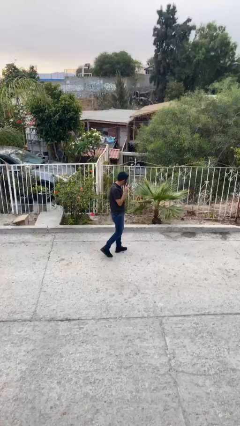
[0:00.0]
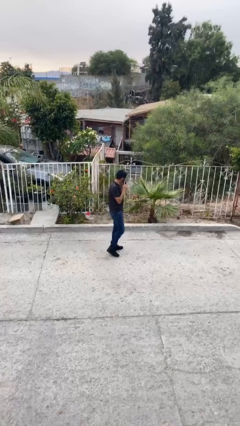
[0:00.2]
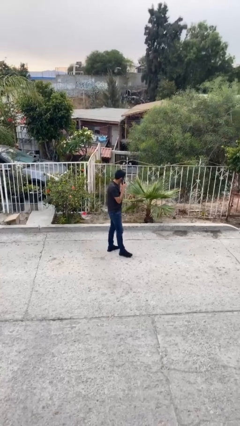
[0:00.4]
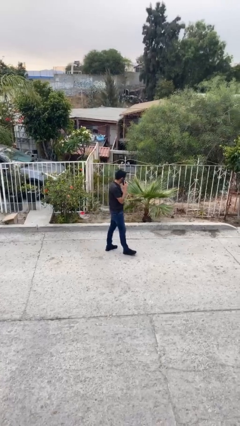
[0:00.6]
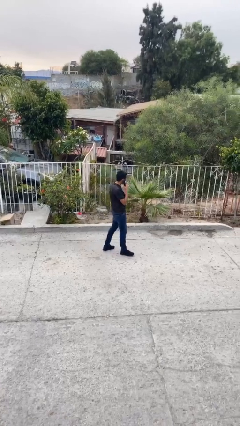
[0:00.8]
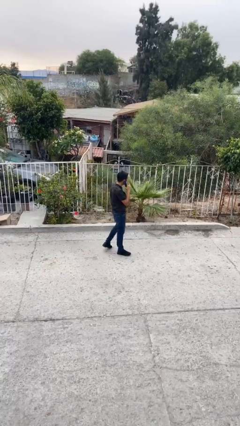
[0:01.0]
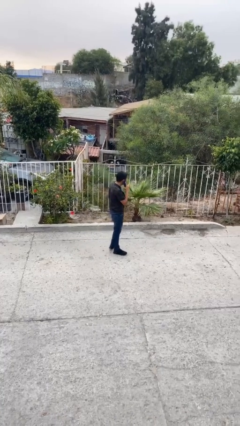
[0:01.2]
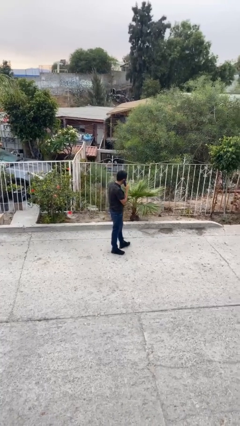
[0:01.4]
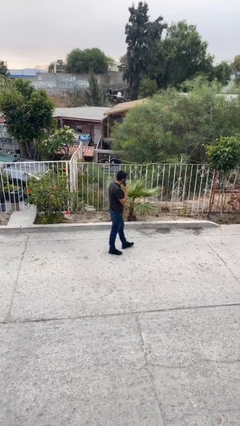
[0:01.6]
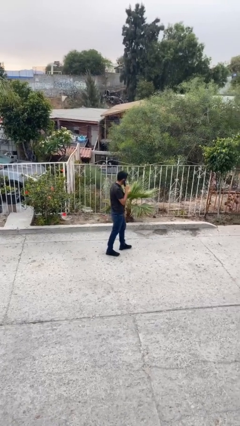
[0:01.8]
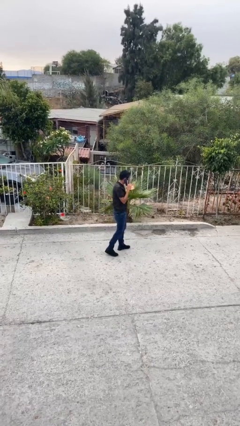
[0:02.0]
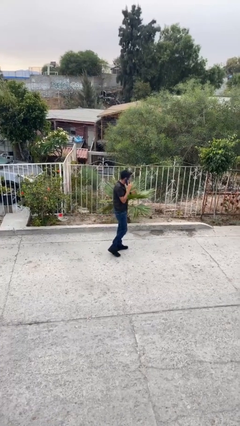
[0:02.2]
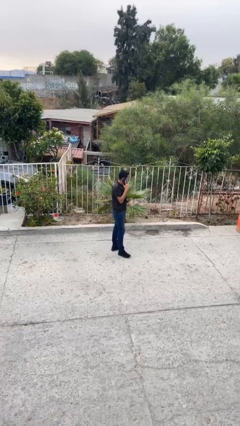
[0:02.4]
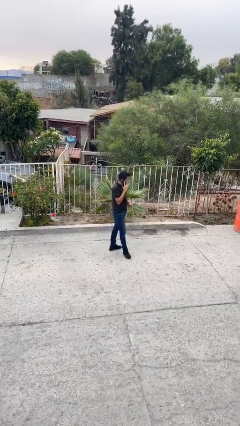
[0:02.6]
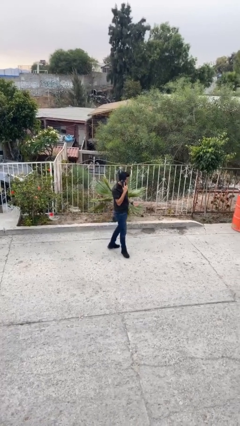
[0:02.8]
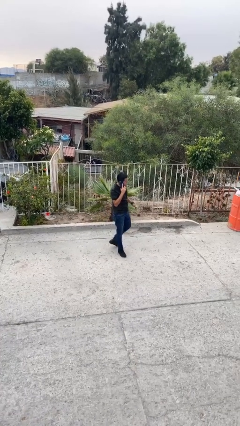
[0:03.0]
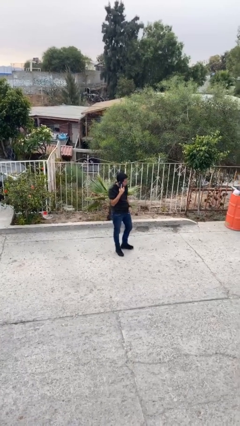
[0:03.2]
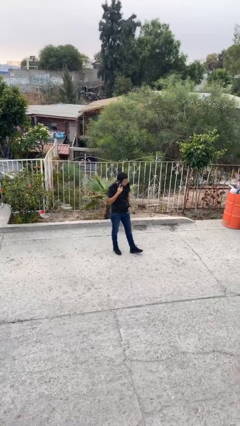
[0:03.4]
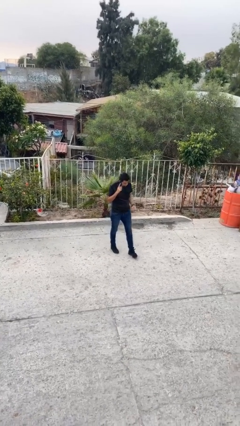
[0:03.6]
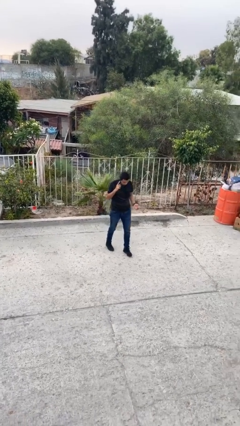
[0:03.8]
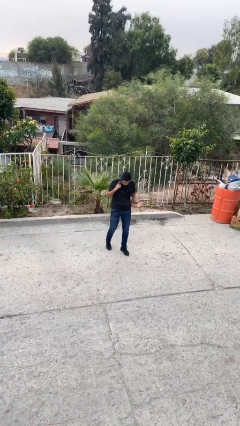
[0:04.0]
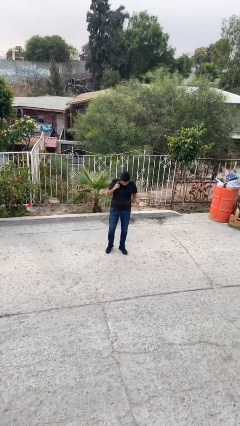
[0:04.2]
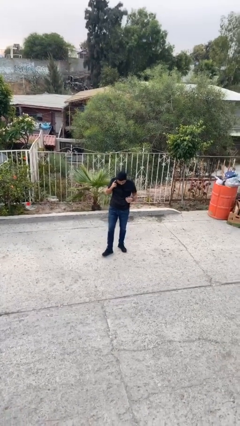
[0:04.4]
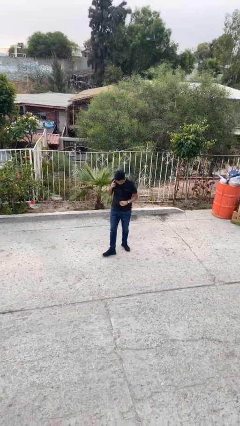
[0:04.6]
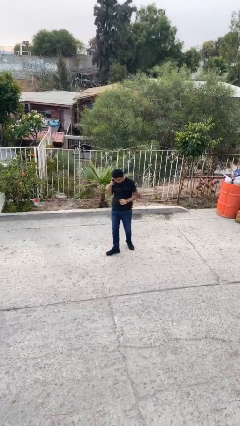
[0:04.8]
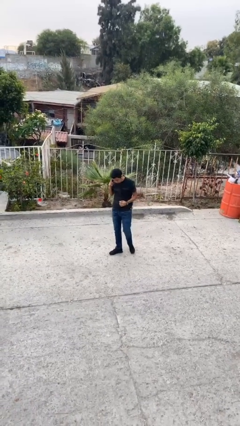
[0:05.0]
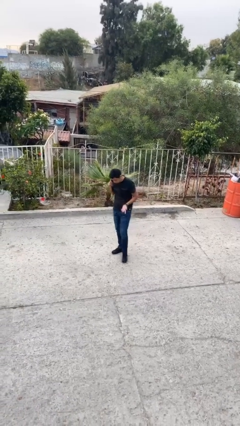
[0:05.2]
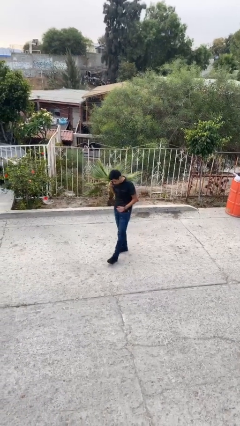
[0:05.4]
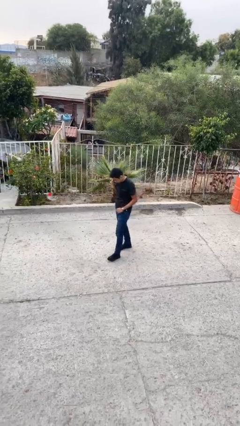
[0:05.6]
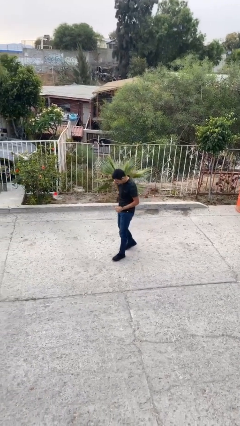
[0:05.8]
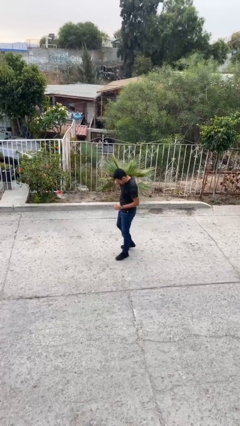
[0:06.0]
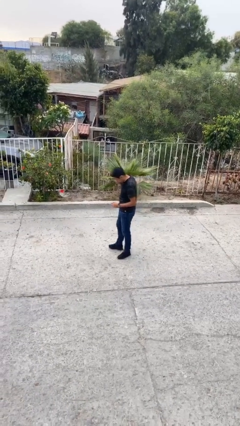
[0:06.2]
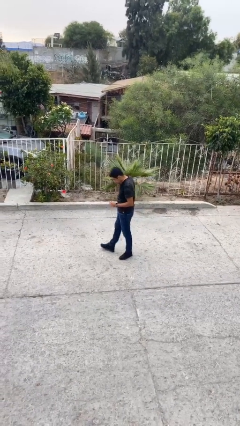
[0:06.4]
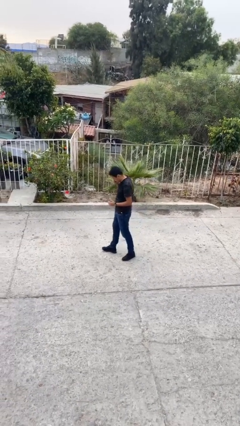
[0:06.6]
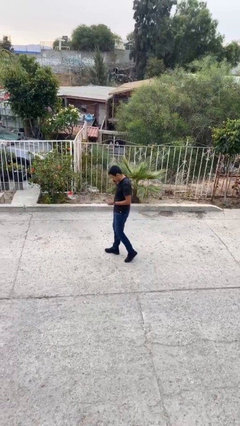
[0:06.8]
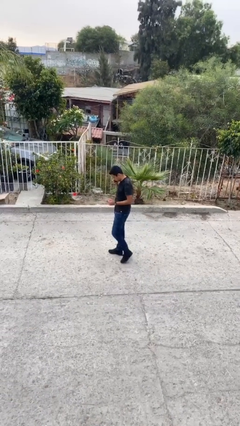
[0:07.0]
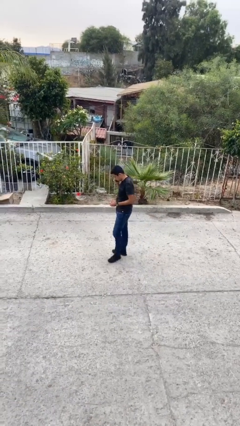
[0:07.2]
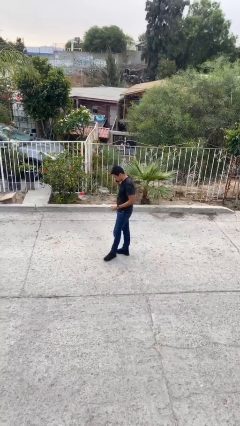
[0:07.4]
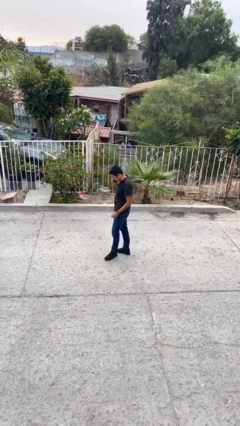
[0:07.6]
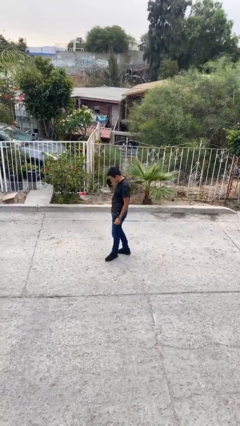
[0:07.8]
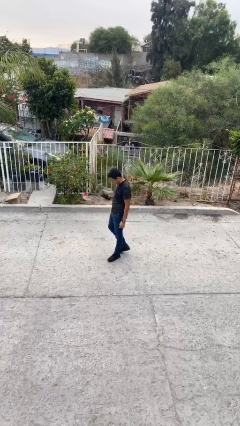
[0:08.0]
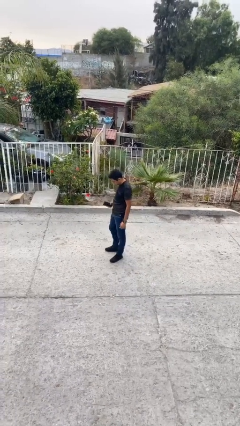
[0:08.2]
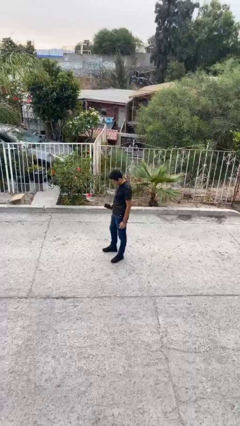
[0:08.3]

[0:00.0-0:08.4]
person talks on phone

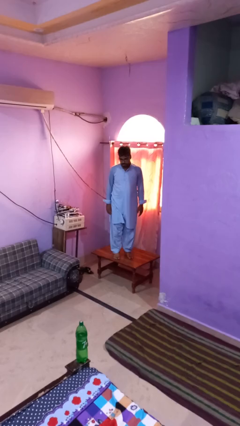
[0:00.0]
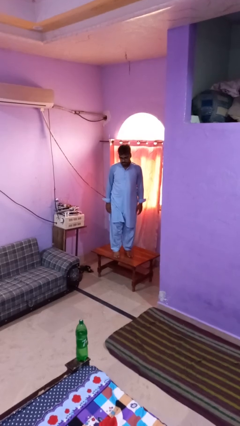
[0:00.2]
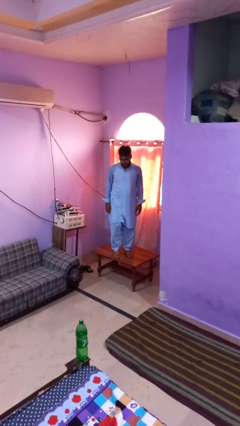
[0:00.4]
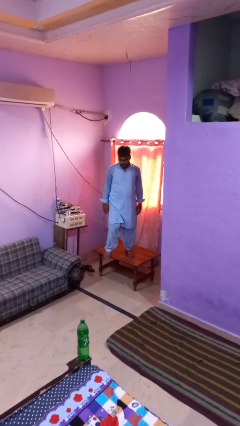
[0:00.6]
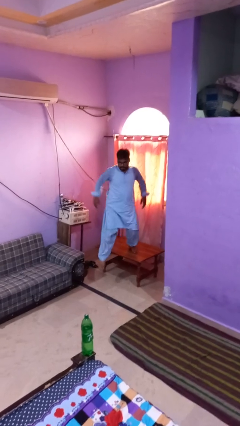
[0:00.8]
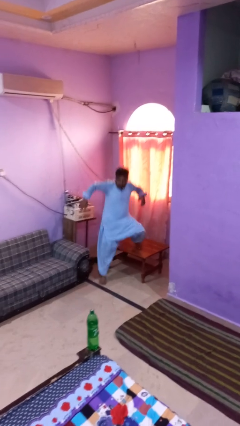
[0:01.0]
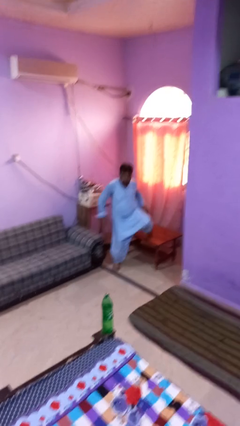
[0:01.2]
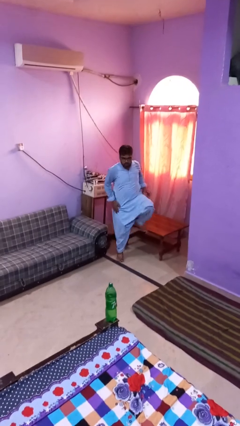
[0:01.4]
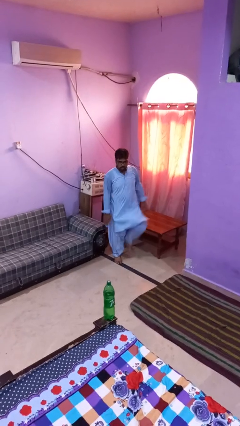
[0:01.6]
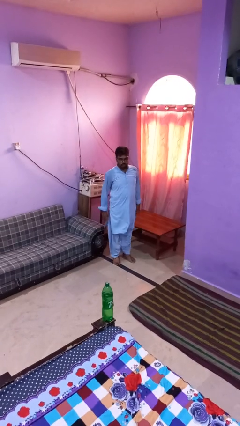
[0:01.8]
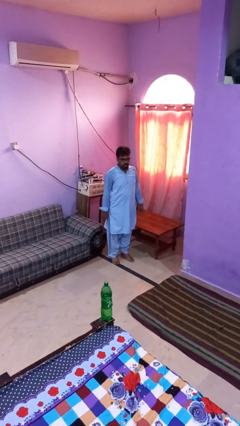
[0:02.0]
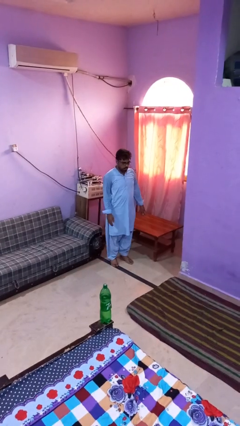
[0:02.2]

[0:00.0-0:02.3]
person climbs off table

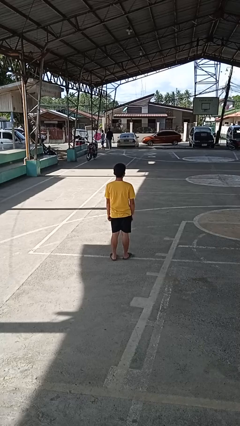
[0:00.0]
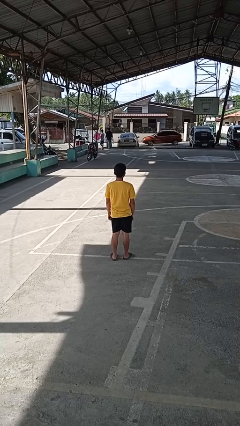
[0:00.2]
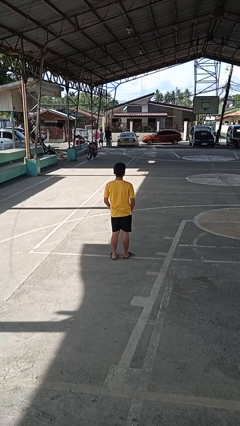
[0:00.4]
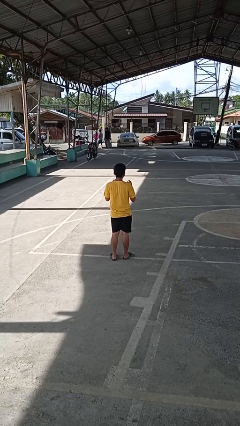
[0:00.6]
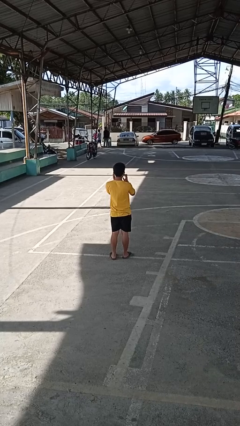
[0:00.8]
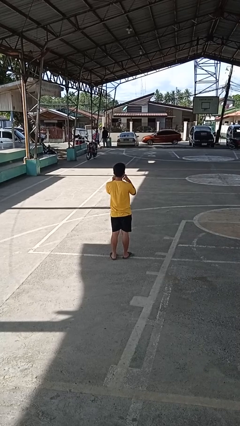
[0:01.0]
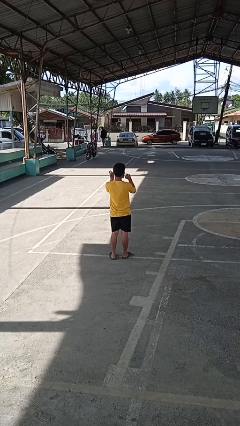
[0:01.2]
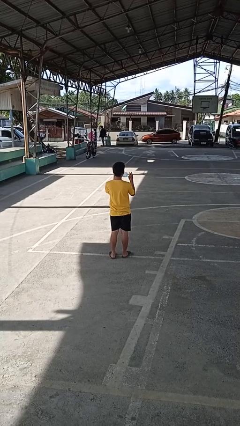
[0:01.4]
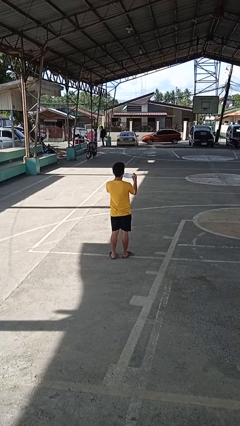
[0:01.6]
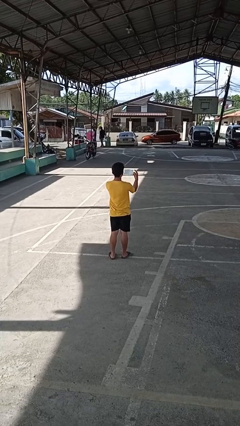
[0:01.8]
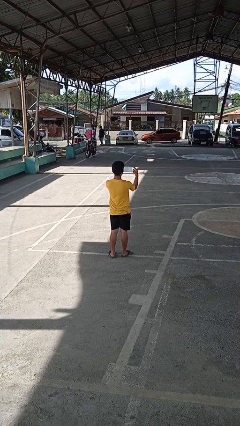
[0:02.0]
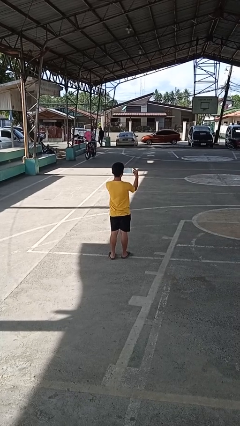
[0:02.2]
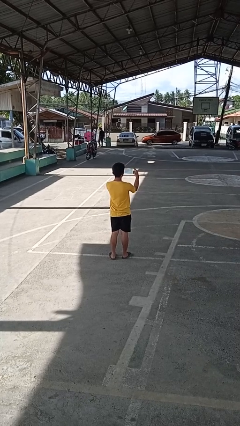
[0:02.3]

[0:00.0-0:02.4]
person takes off facemask

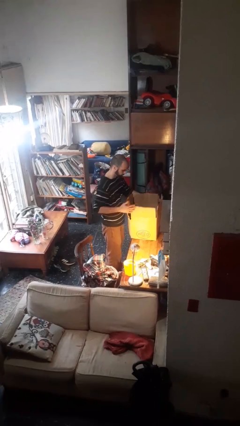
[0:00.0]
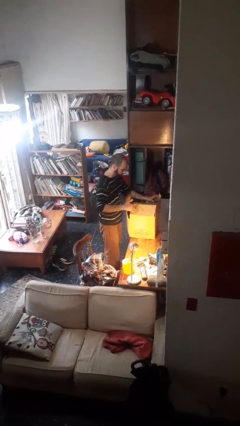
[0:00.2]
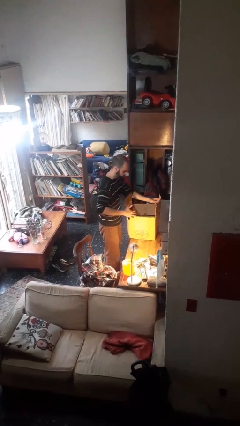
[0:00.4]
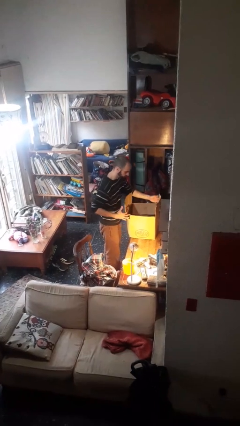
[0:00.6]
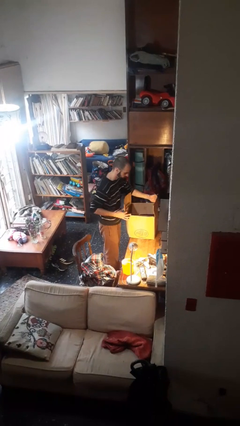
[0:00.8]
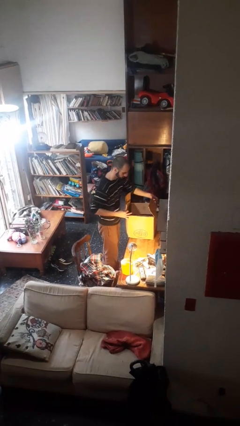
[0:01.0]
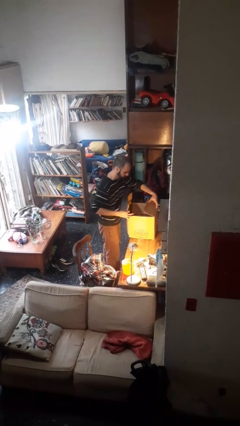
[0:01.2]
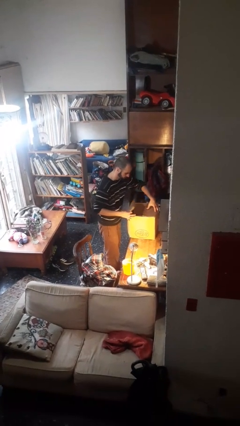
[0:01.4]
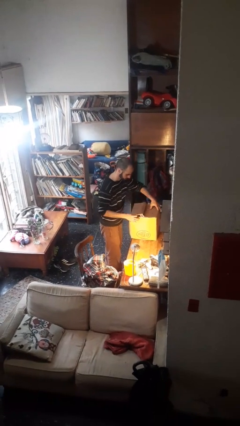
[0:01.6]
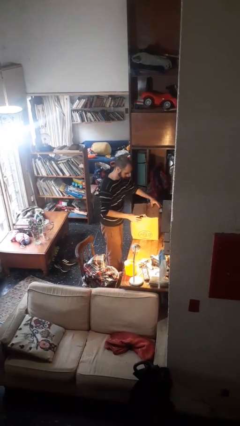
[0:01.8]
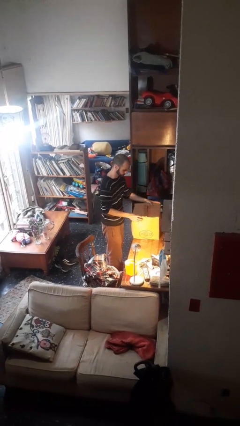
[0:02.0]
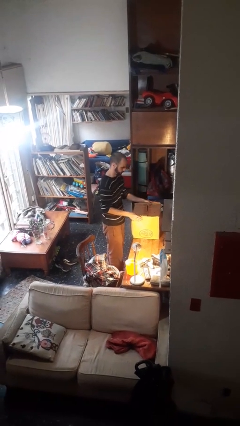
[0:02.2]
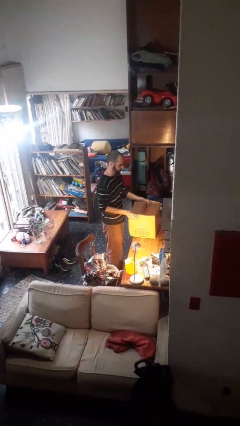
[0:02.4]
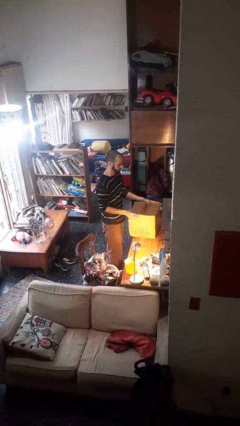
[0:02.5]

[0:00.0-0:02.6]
person closes box

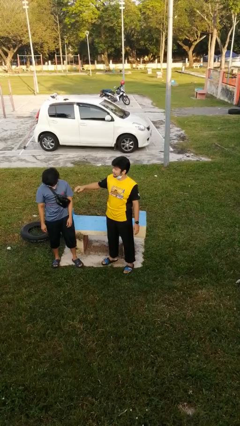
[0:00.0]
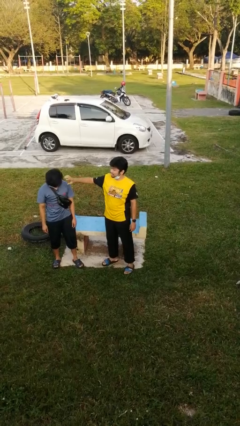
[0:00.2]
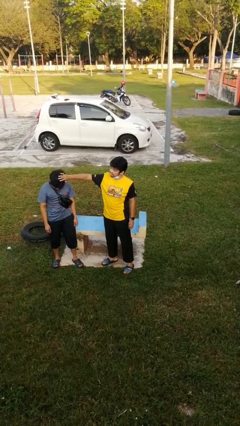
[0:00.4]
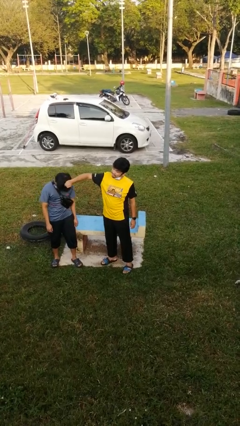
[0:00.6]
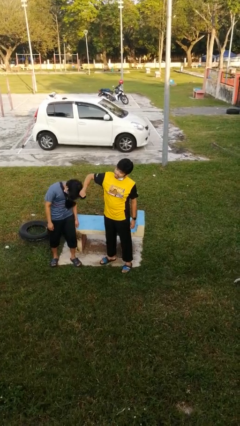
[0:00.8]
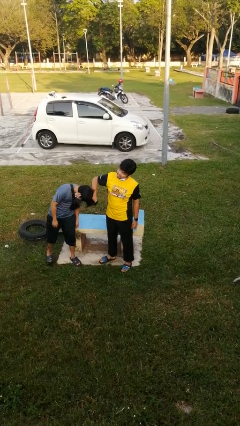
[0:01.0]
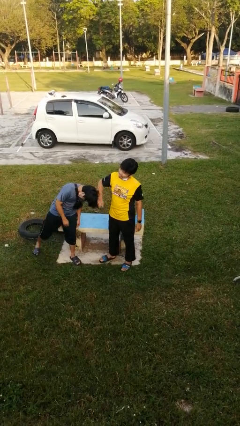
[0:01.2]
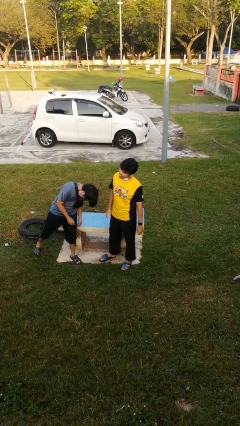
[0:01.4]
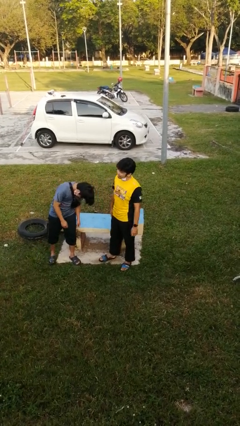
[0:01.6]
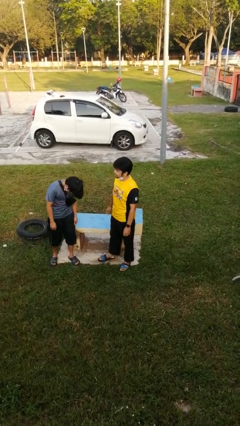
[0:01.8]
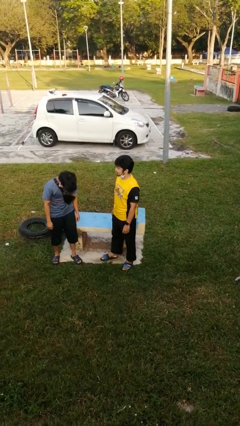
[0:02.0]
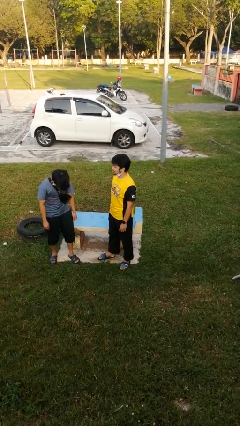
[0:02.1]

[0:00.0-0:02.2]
person grabs person by hair
